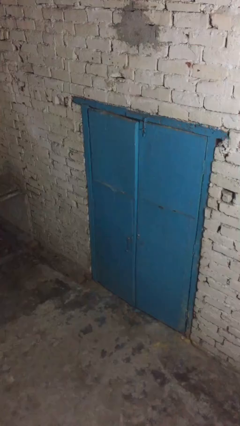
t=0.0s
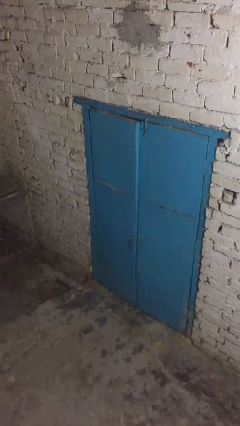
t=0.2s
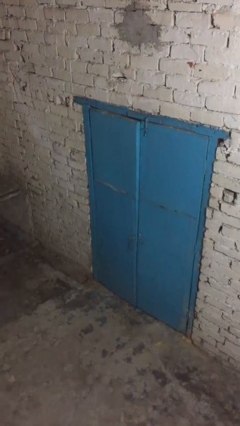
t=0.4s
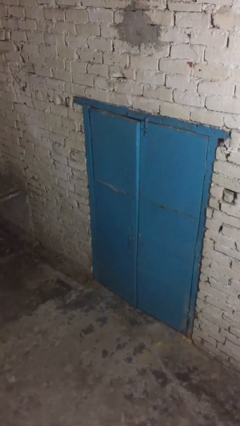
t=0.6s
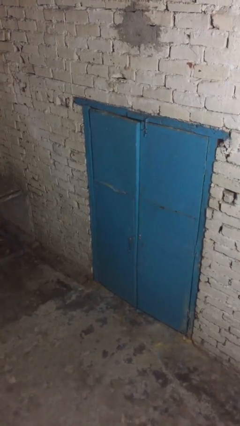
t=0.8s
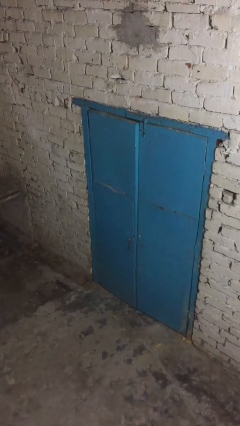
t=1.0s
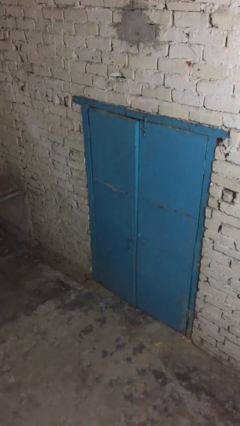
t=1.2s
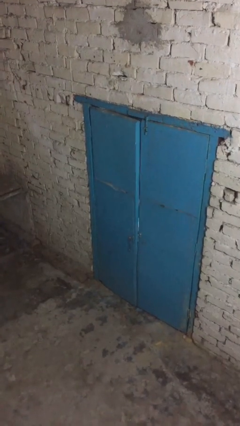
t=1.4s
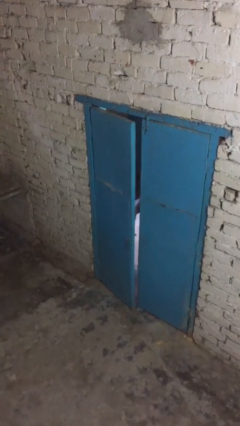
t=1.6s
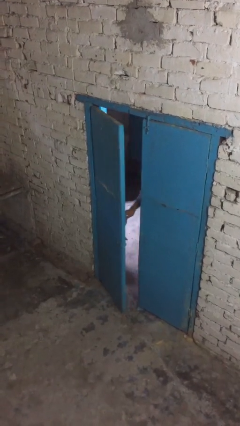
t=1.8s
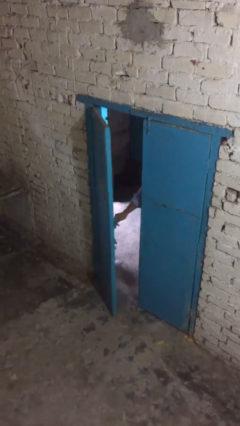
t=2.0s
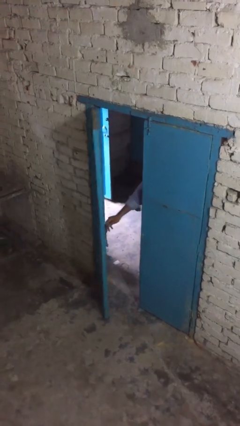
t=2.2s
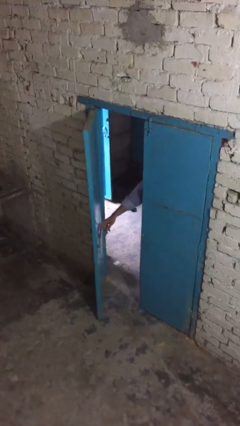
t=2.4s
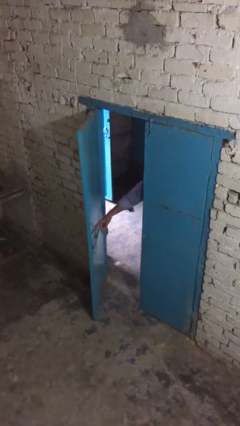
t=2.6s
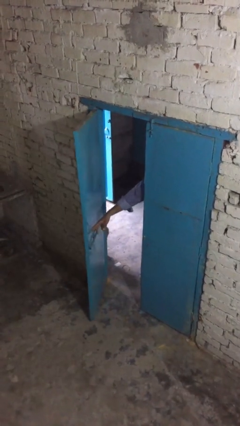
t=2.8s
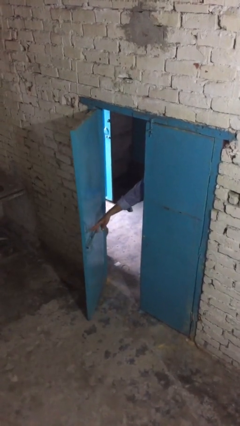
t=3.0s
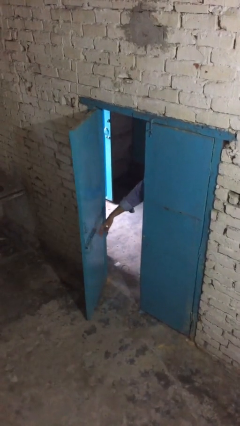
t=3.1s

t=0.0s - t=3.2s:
person opens facility door

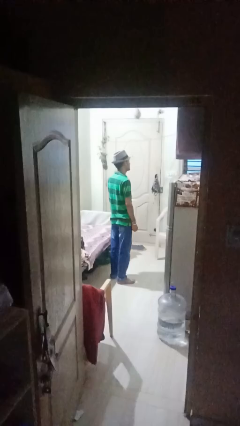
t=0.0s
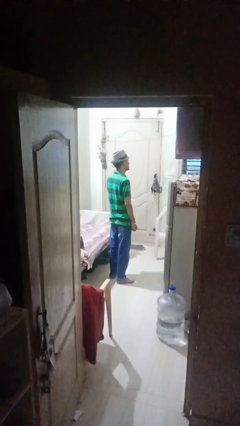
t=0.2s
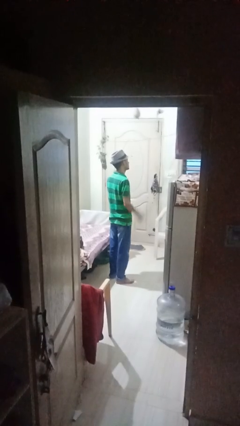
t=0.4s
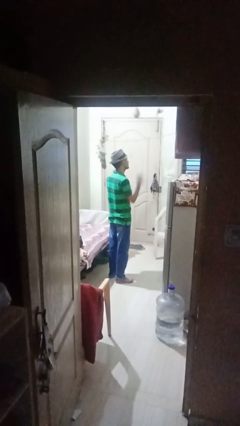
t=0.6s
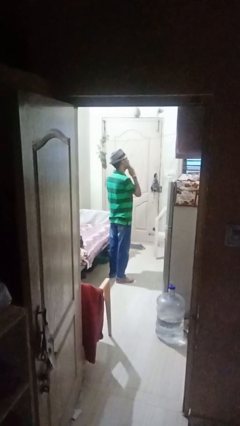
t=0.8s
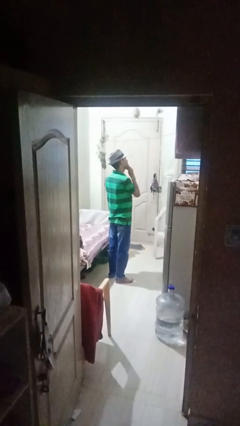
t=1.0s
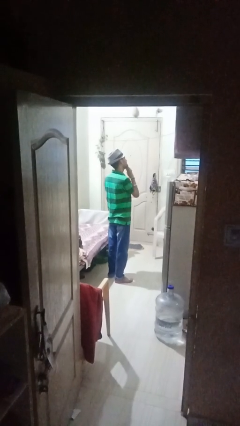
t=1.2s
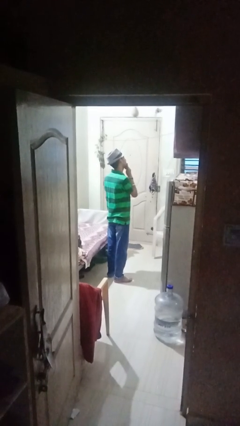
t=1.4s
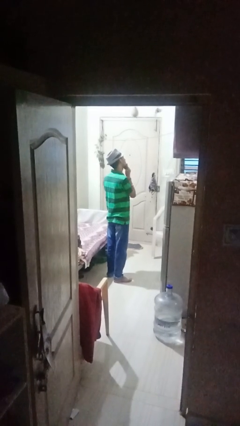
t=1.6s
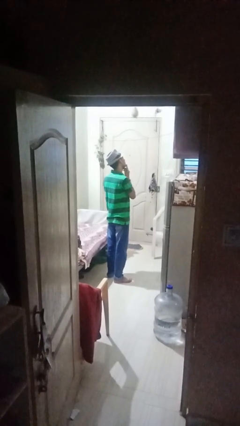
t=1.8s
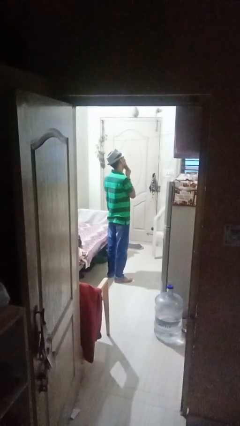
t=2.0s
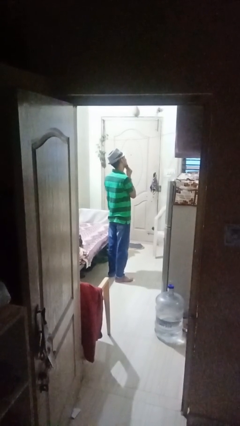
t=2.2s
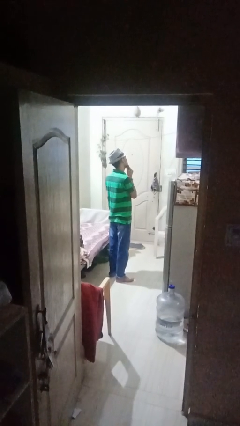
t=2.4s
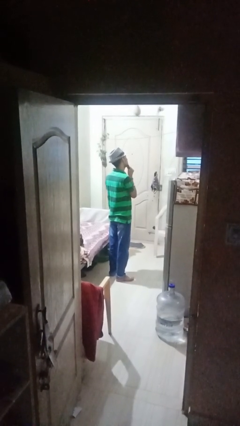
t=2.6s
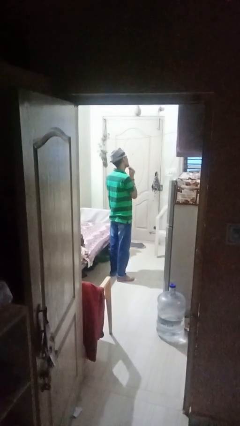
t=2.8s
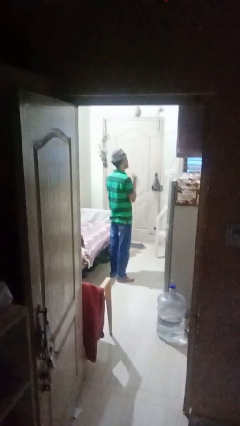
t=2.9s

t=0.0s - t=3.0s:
person strokes chin

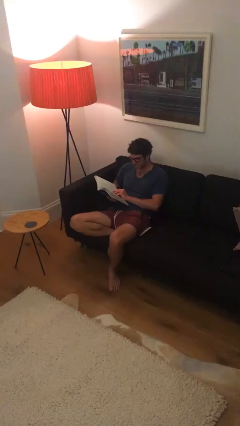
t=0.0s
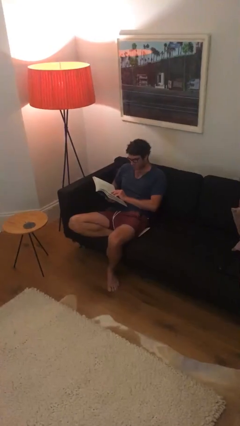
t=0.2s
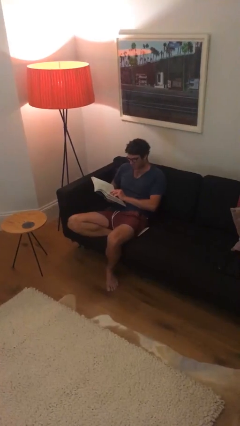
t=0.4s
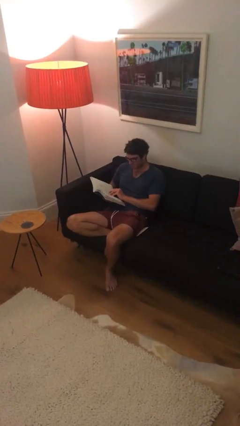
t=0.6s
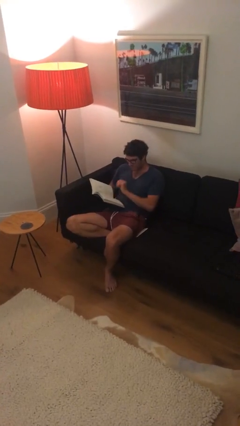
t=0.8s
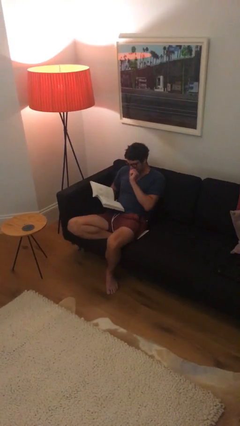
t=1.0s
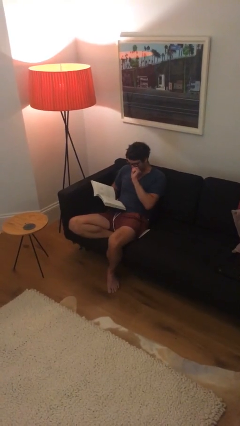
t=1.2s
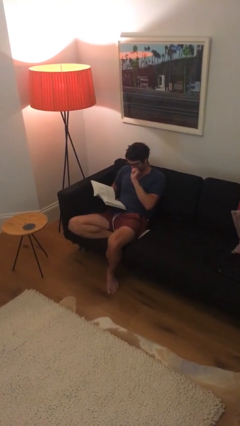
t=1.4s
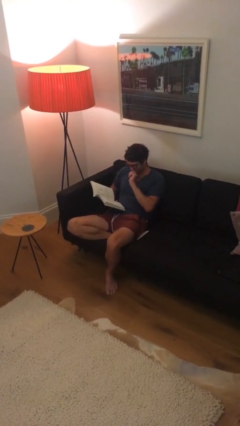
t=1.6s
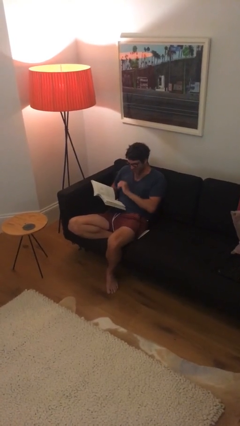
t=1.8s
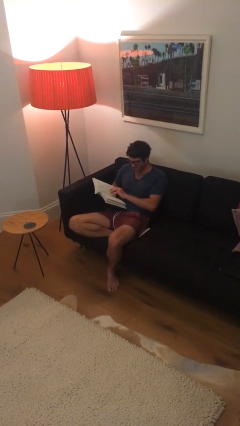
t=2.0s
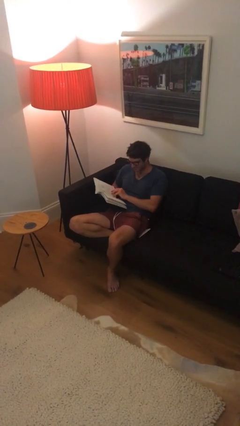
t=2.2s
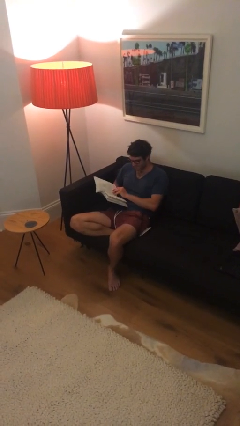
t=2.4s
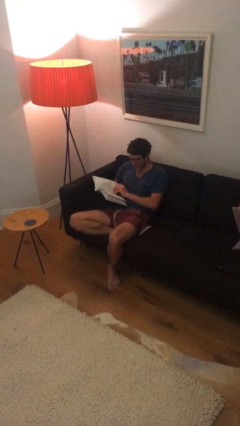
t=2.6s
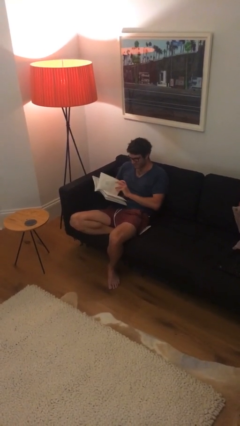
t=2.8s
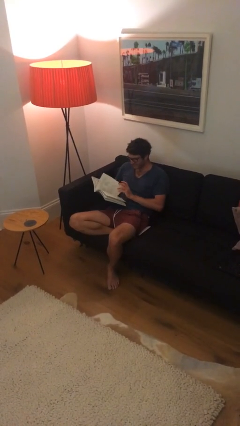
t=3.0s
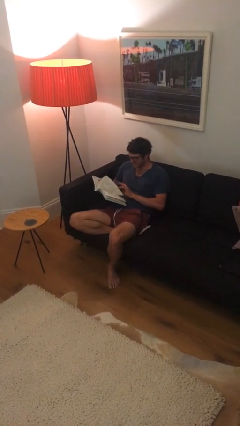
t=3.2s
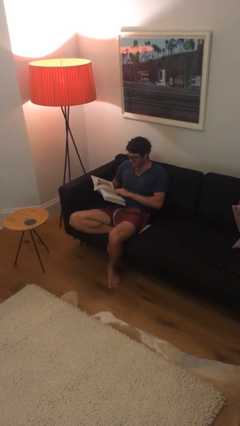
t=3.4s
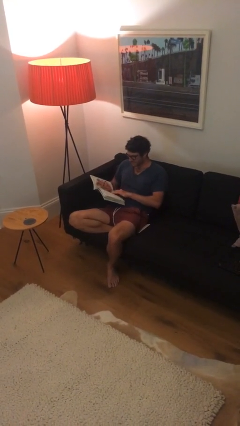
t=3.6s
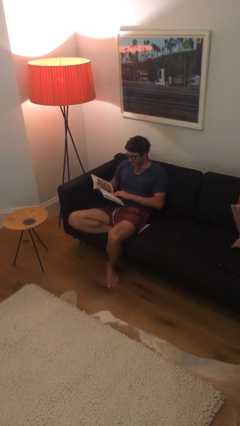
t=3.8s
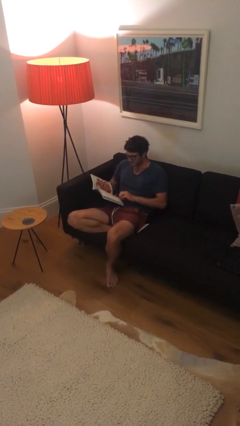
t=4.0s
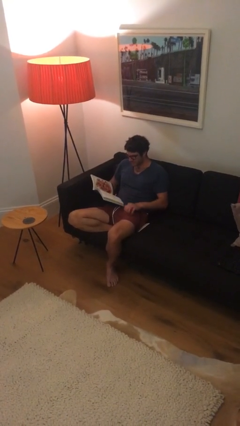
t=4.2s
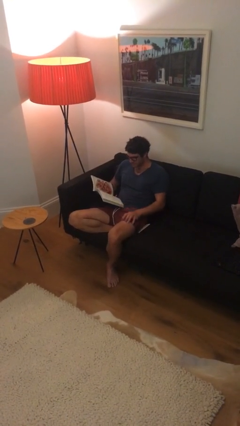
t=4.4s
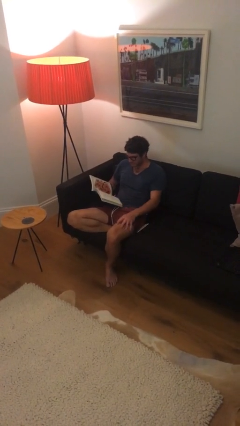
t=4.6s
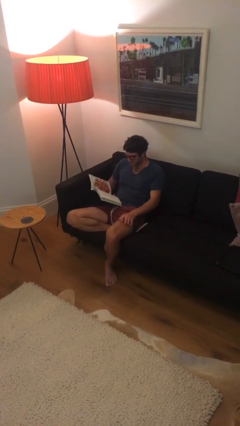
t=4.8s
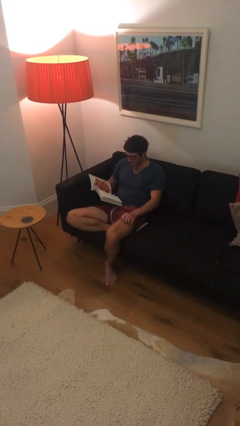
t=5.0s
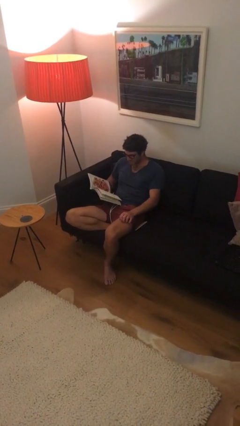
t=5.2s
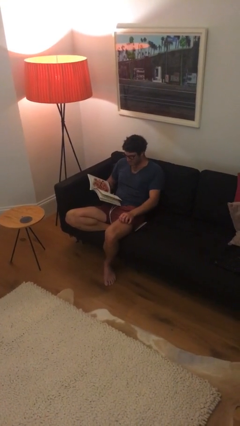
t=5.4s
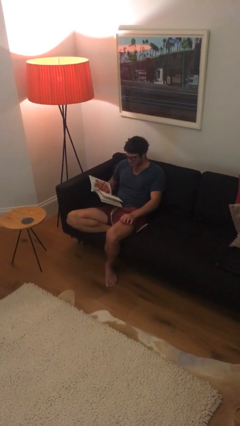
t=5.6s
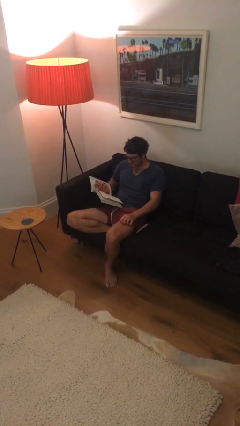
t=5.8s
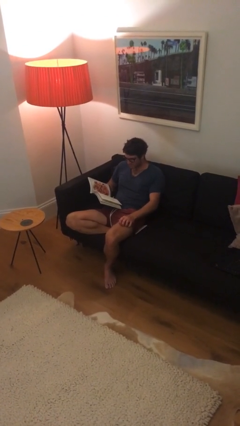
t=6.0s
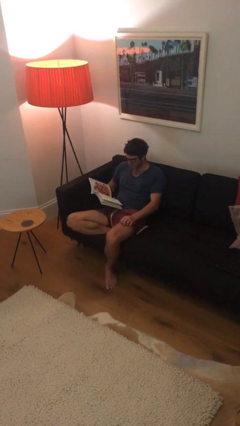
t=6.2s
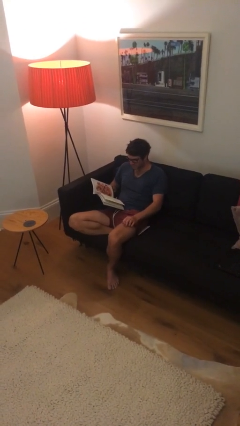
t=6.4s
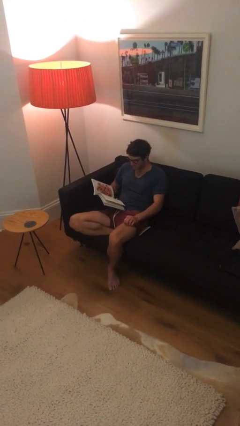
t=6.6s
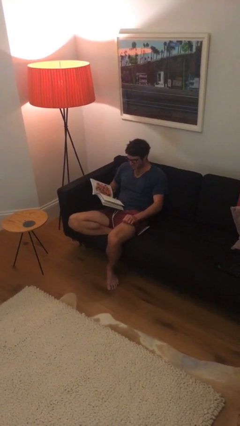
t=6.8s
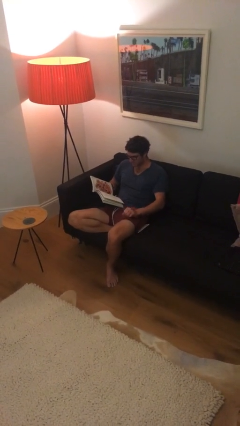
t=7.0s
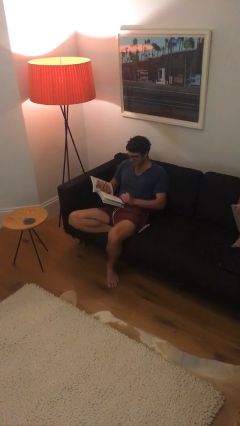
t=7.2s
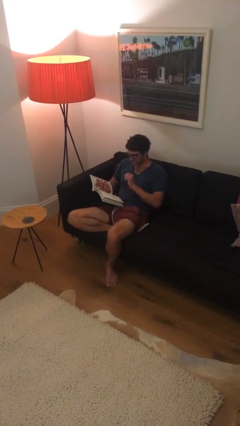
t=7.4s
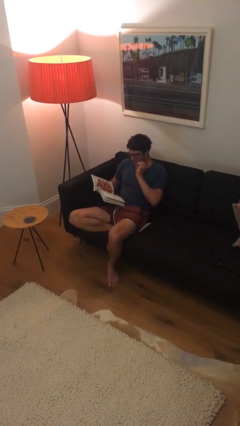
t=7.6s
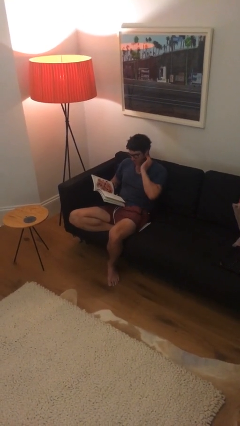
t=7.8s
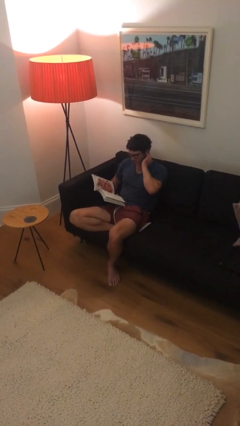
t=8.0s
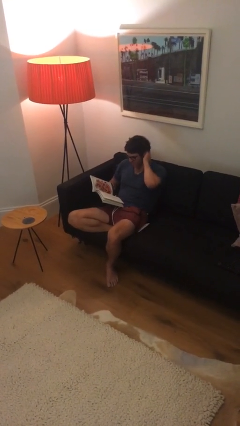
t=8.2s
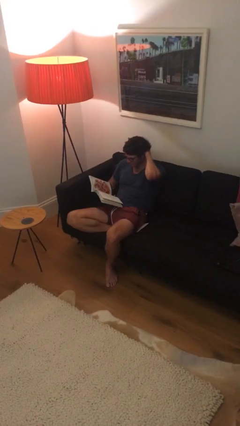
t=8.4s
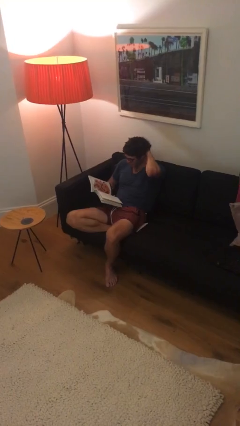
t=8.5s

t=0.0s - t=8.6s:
person reads document

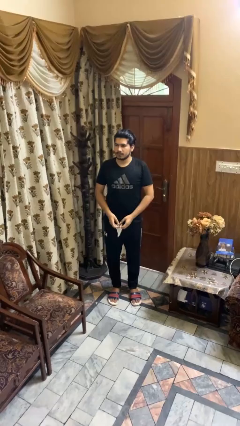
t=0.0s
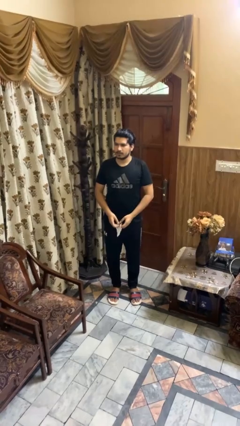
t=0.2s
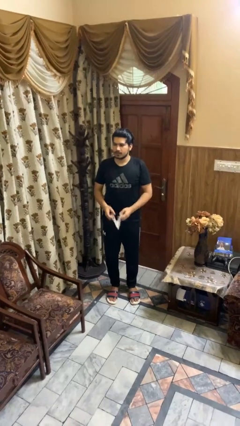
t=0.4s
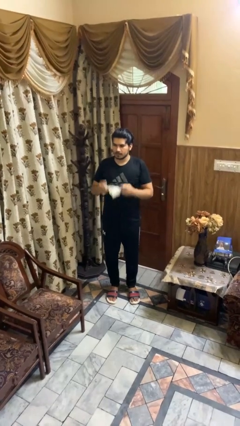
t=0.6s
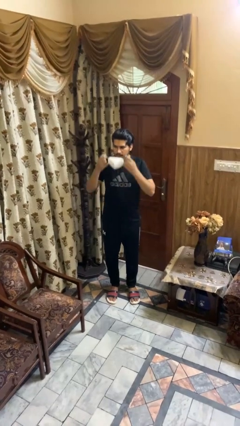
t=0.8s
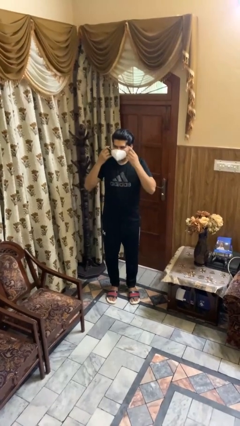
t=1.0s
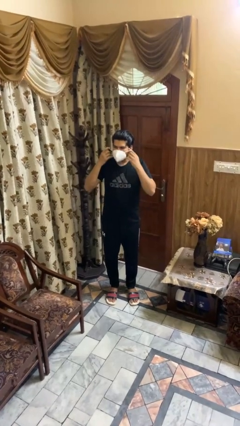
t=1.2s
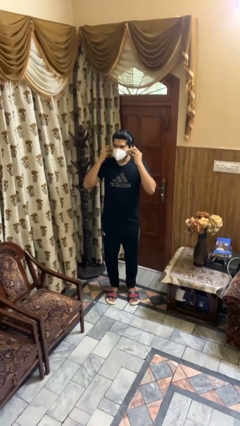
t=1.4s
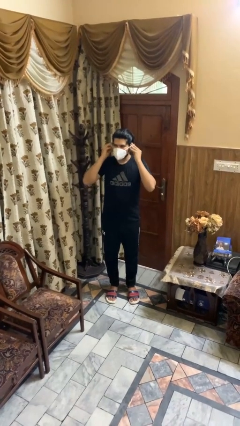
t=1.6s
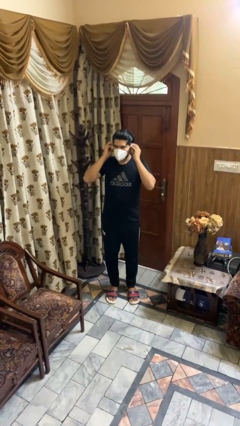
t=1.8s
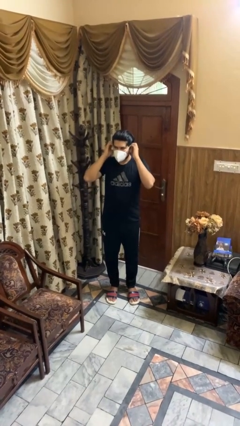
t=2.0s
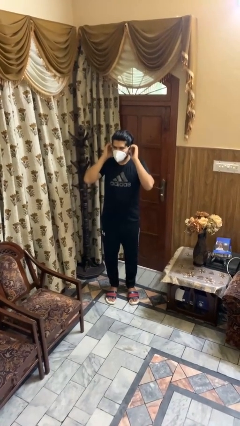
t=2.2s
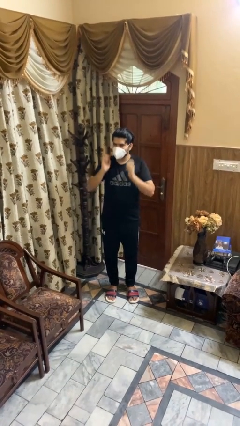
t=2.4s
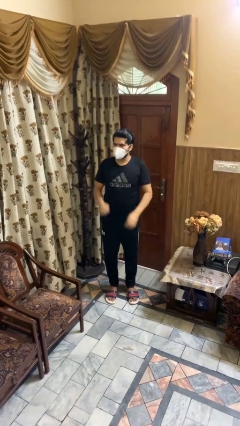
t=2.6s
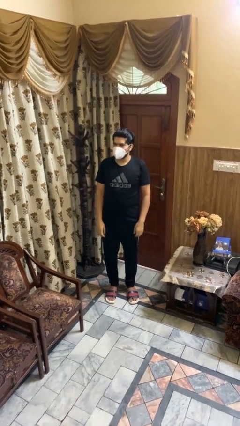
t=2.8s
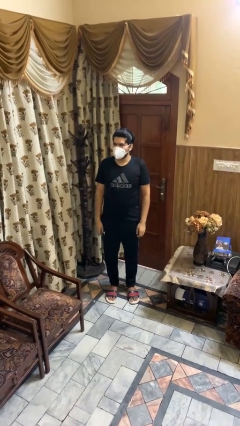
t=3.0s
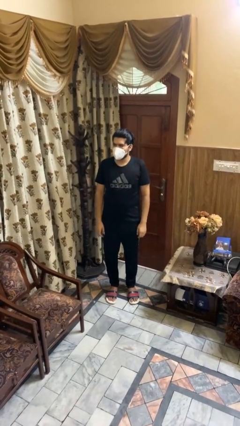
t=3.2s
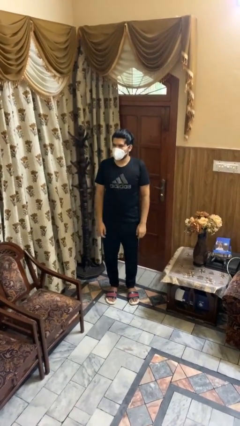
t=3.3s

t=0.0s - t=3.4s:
person puts on facemask
